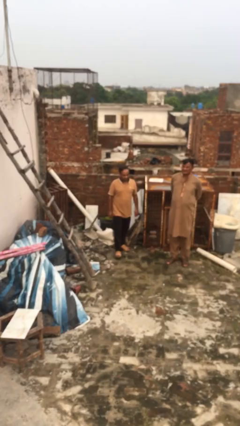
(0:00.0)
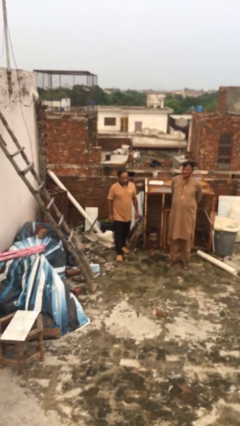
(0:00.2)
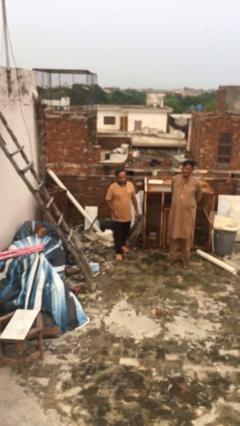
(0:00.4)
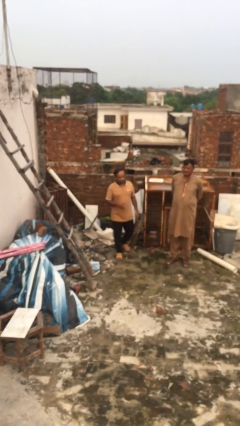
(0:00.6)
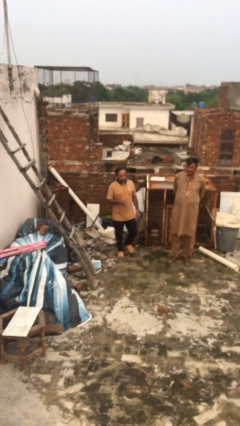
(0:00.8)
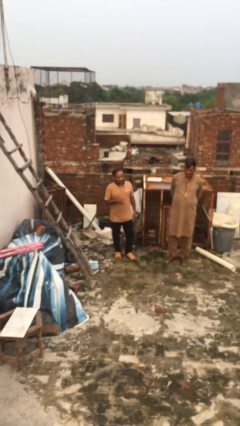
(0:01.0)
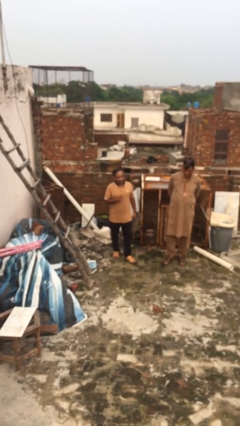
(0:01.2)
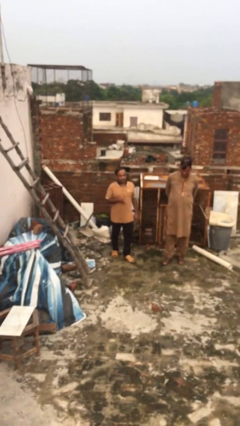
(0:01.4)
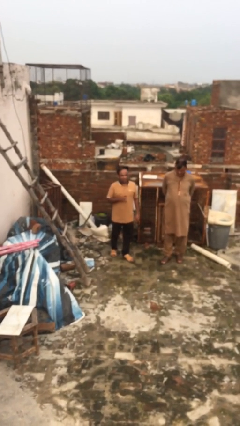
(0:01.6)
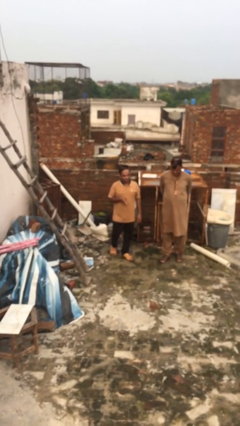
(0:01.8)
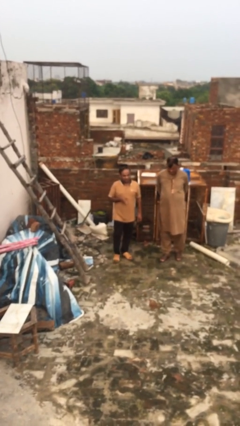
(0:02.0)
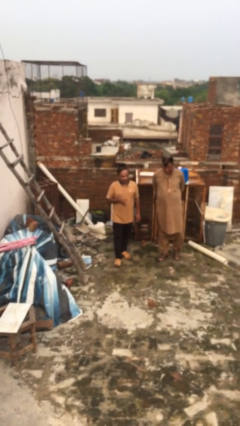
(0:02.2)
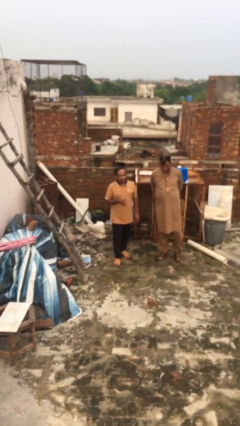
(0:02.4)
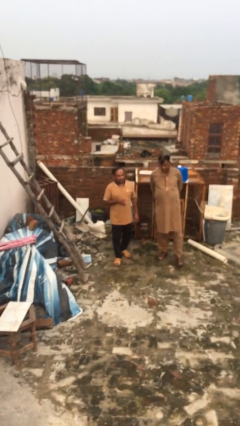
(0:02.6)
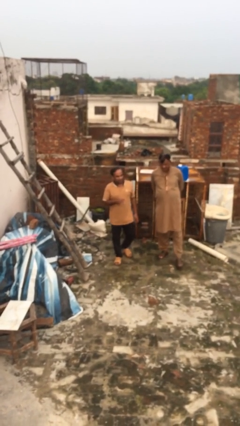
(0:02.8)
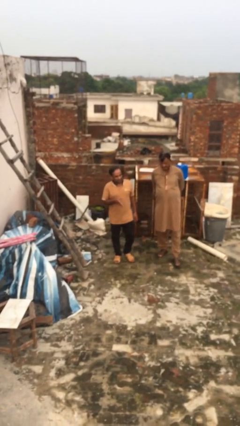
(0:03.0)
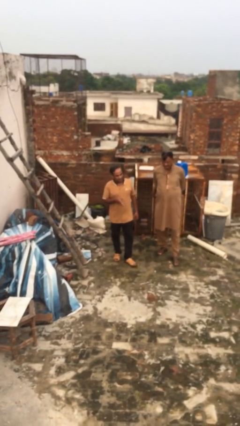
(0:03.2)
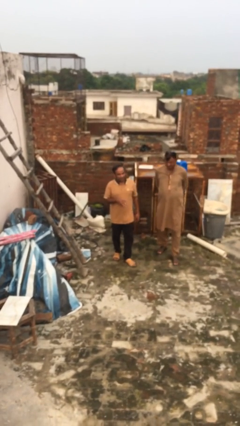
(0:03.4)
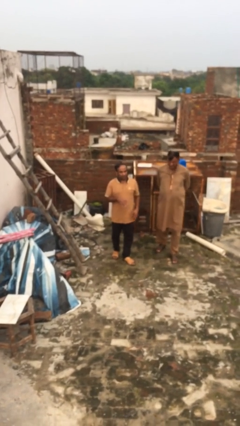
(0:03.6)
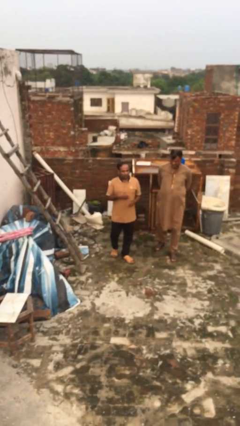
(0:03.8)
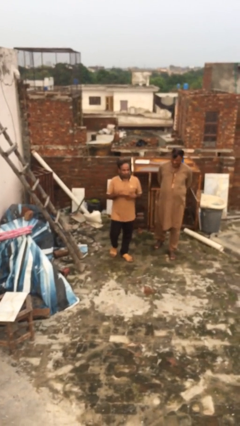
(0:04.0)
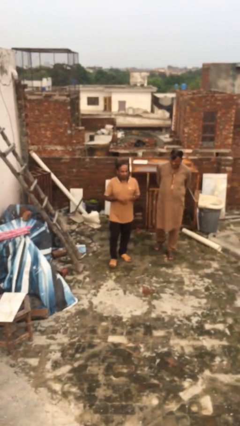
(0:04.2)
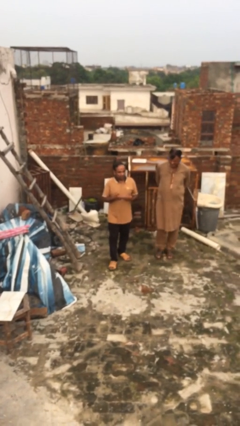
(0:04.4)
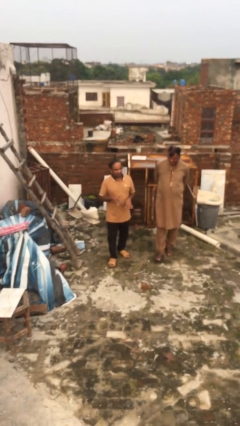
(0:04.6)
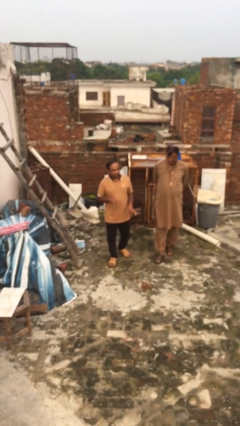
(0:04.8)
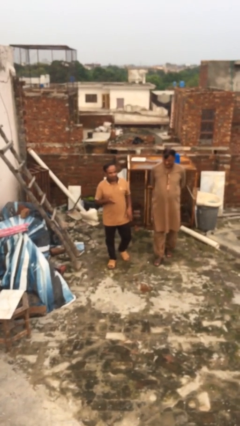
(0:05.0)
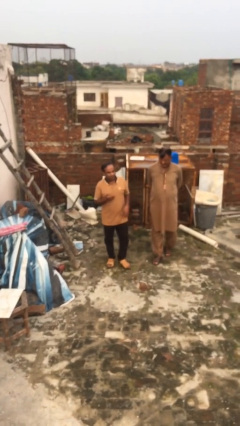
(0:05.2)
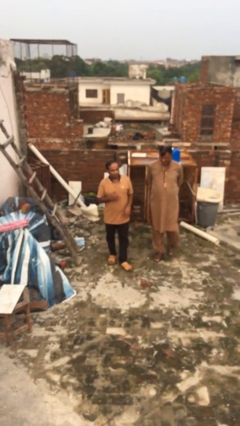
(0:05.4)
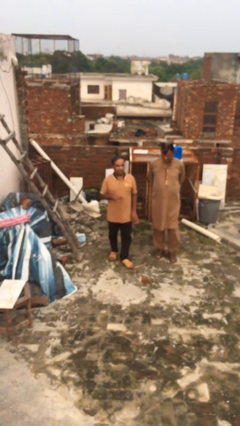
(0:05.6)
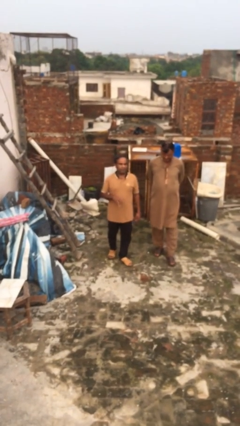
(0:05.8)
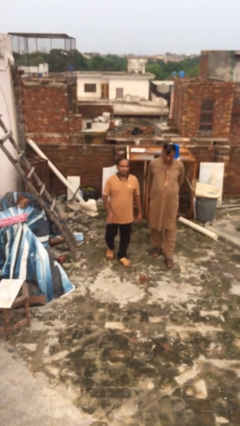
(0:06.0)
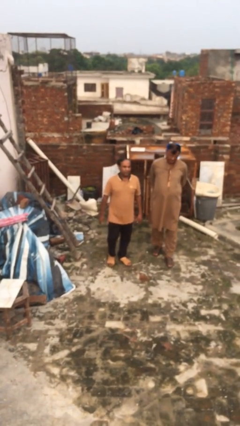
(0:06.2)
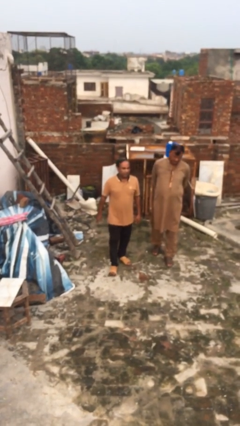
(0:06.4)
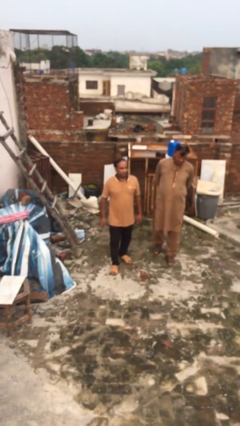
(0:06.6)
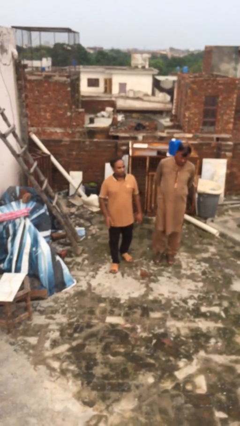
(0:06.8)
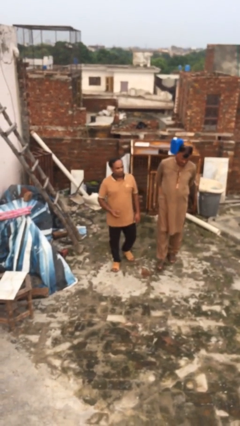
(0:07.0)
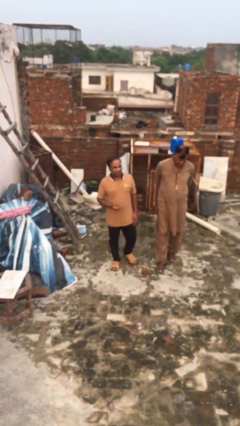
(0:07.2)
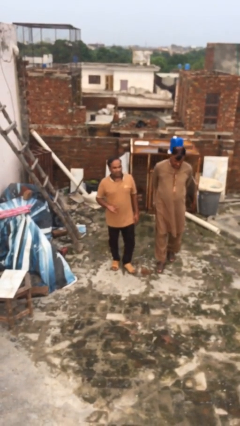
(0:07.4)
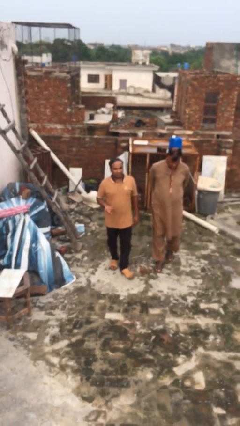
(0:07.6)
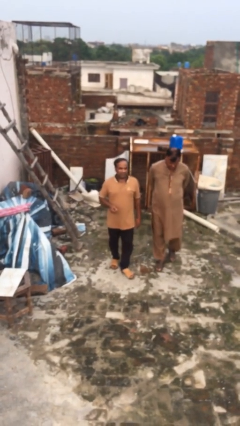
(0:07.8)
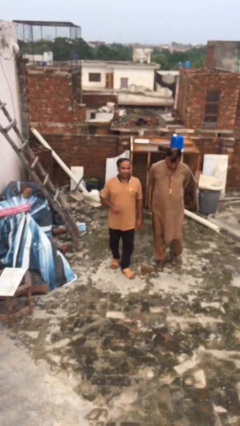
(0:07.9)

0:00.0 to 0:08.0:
person talks to person

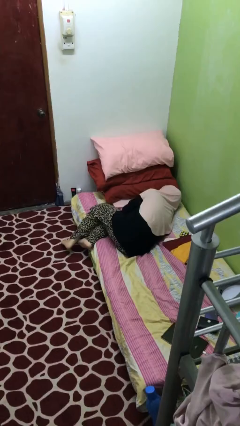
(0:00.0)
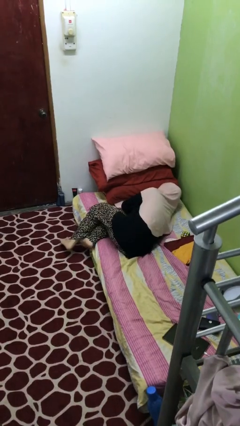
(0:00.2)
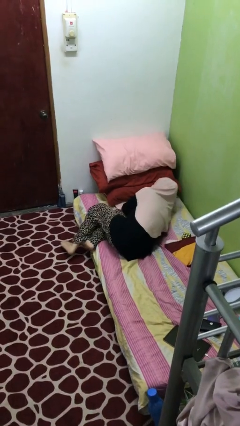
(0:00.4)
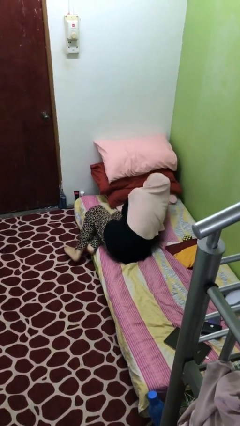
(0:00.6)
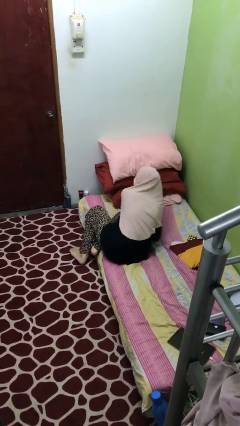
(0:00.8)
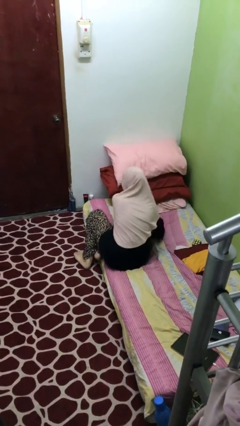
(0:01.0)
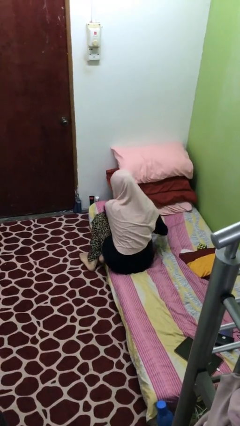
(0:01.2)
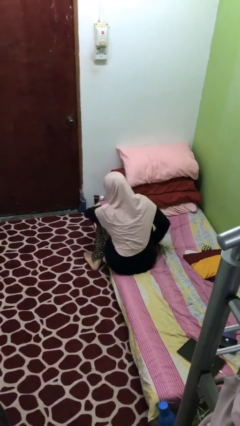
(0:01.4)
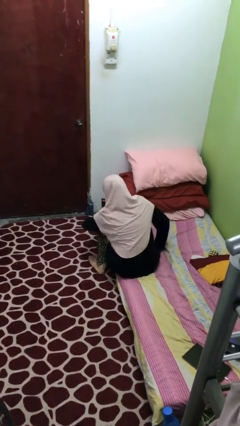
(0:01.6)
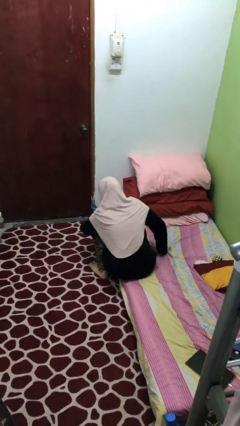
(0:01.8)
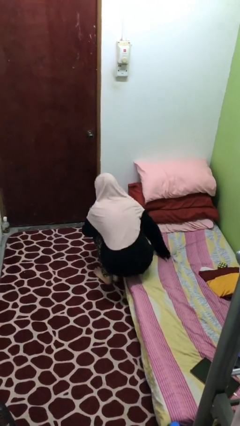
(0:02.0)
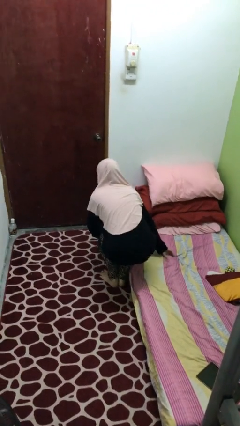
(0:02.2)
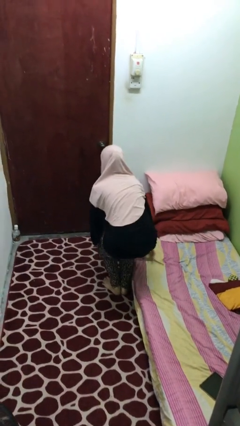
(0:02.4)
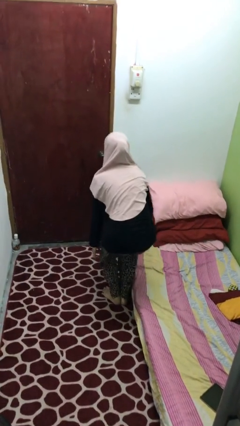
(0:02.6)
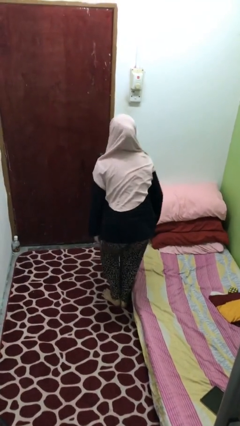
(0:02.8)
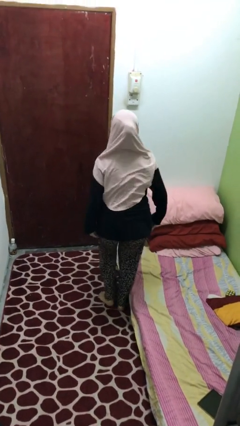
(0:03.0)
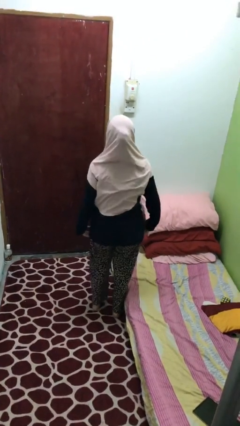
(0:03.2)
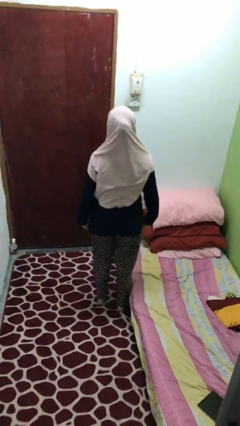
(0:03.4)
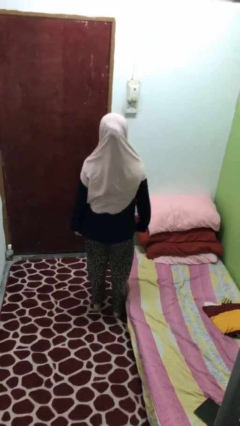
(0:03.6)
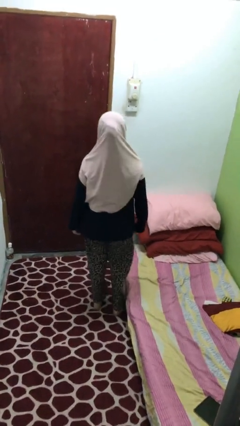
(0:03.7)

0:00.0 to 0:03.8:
person stands up

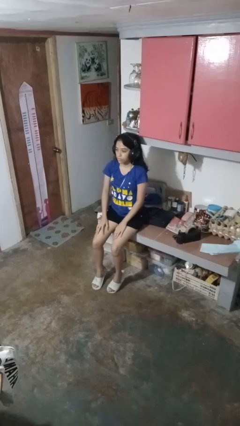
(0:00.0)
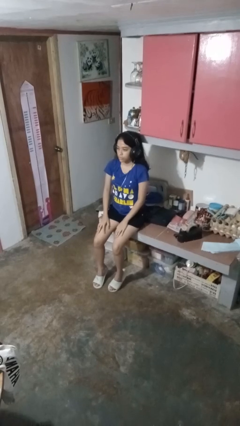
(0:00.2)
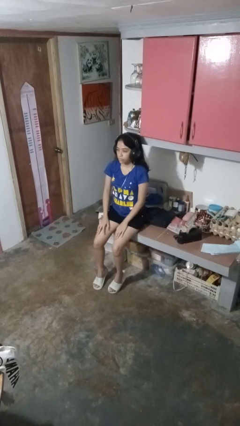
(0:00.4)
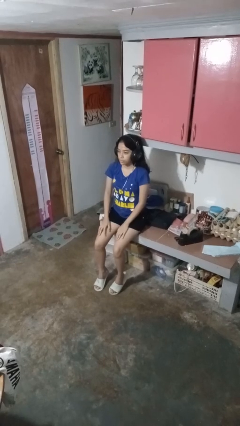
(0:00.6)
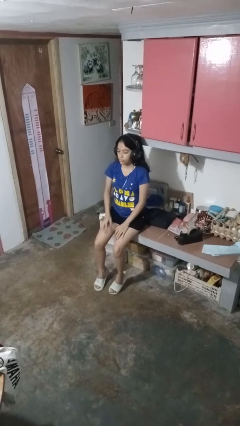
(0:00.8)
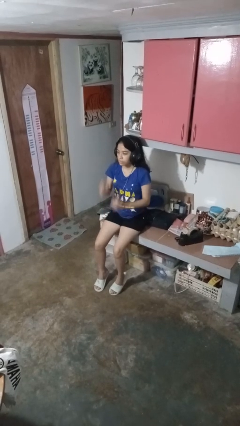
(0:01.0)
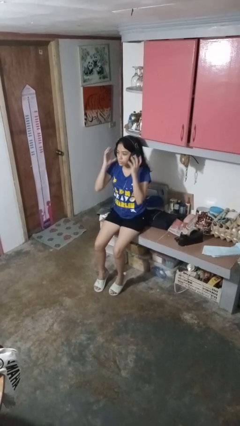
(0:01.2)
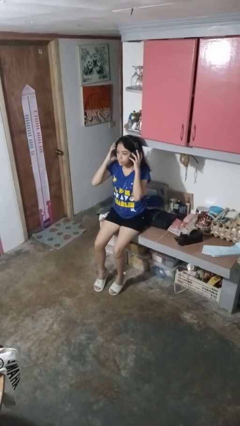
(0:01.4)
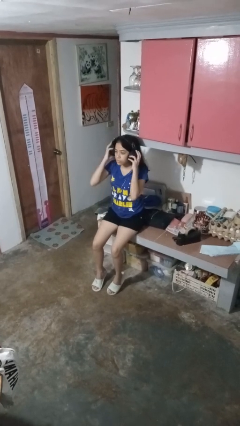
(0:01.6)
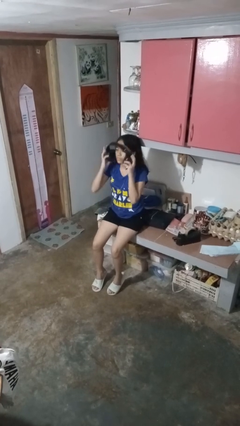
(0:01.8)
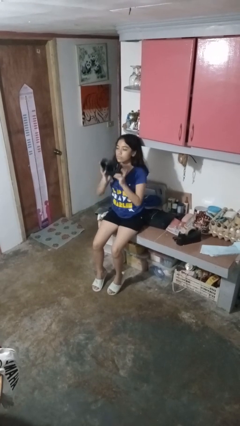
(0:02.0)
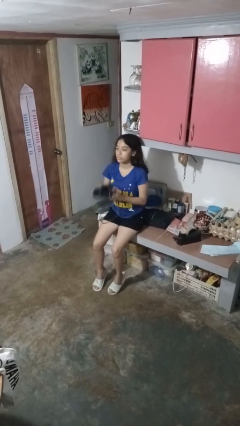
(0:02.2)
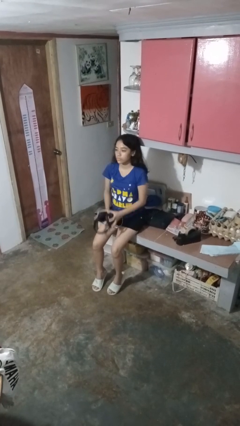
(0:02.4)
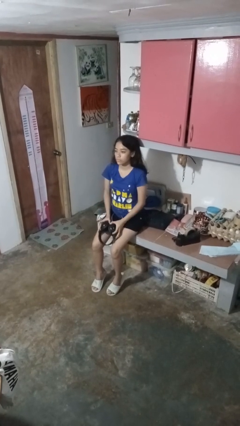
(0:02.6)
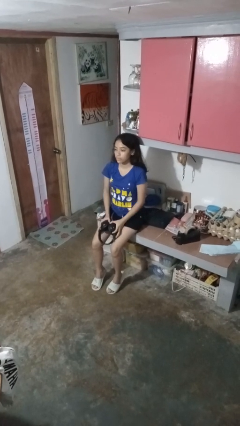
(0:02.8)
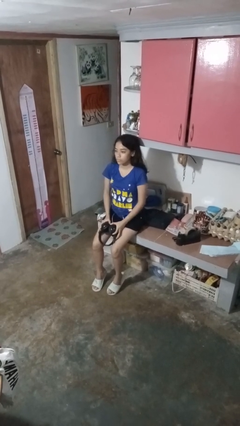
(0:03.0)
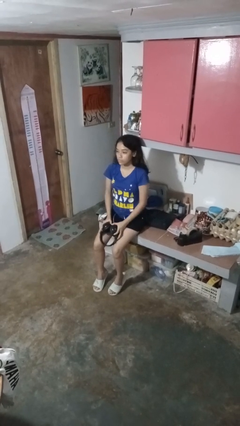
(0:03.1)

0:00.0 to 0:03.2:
person takes off headphones

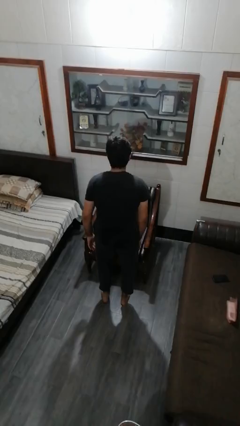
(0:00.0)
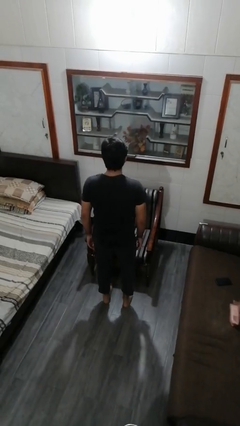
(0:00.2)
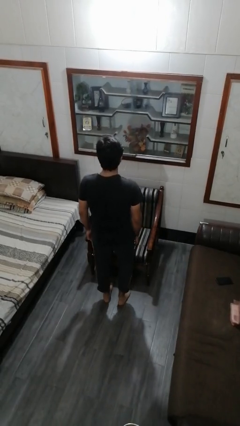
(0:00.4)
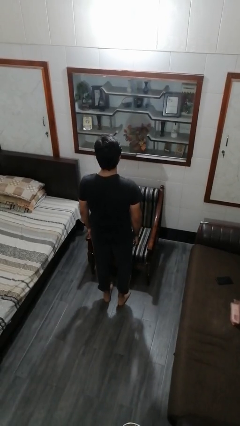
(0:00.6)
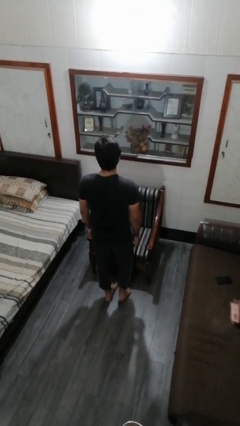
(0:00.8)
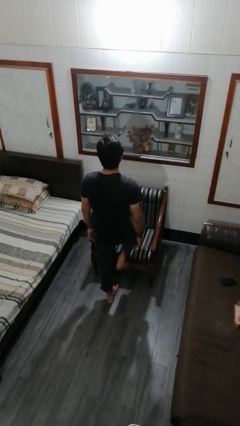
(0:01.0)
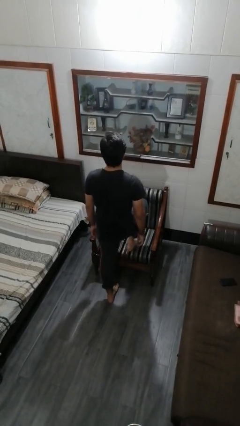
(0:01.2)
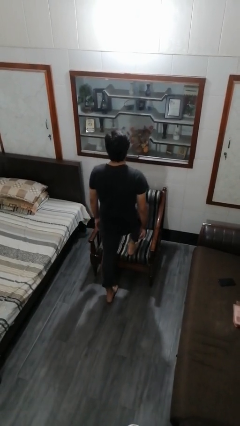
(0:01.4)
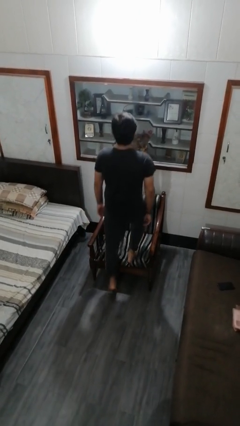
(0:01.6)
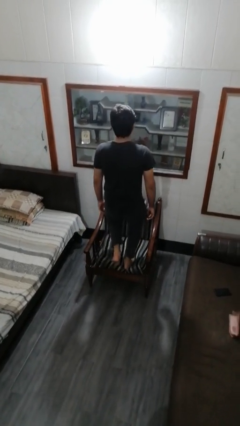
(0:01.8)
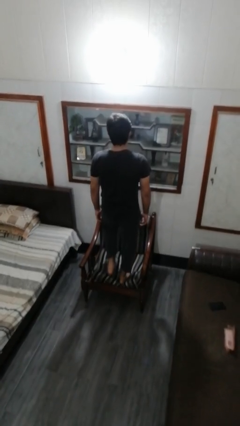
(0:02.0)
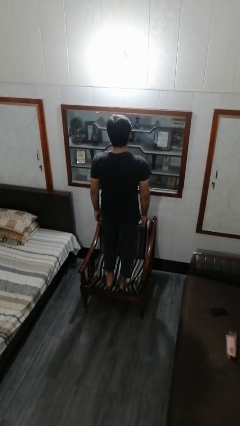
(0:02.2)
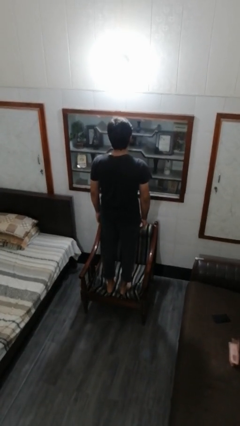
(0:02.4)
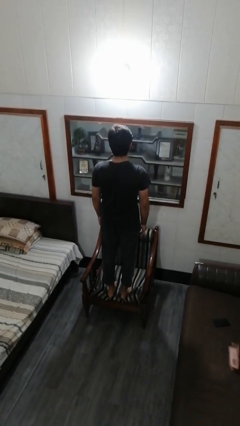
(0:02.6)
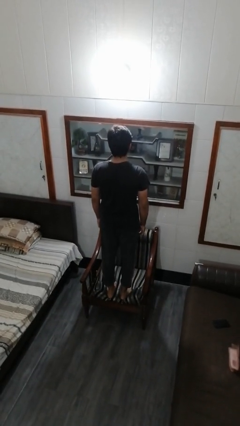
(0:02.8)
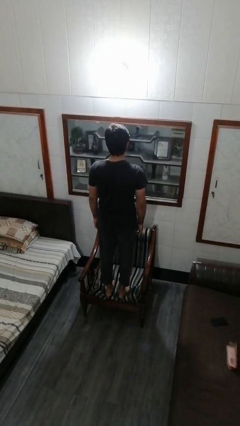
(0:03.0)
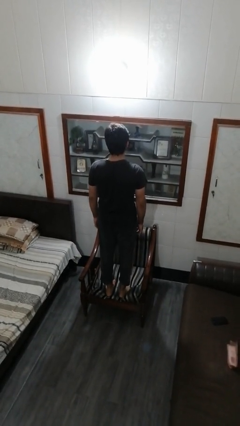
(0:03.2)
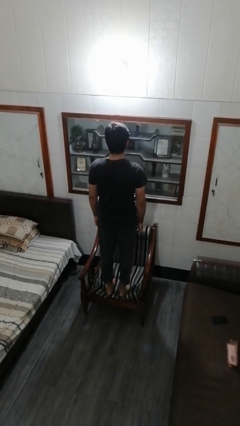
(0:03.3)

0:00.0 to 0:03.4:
person climbs on chair
